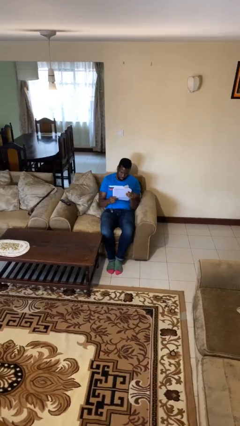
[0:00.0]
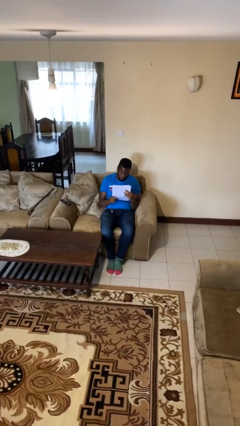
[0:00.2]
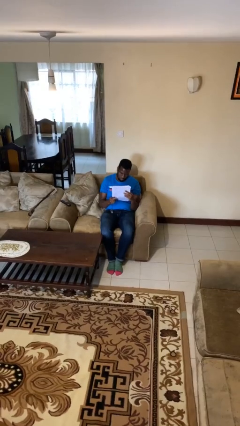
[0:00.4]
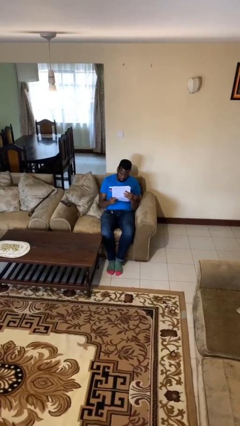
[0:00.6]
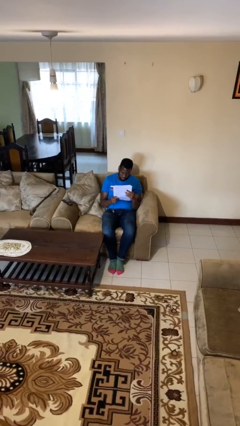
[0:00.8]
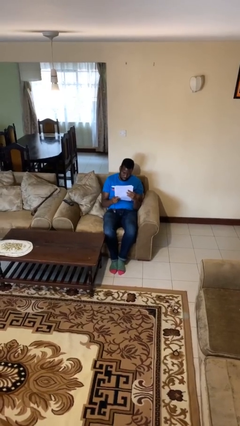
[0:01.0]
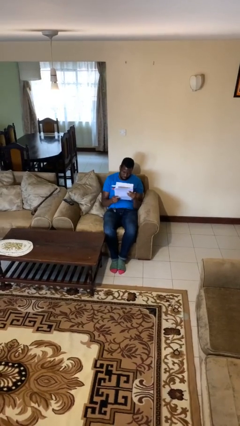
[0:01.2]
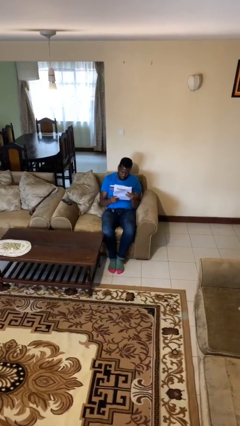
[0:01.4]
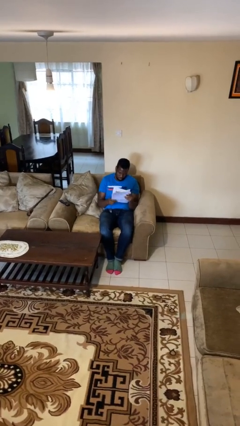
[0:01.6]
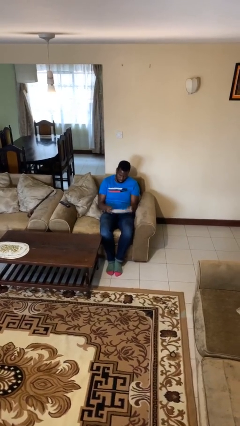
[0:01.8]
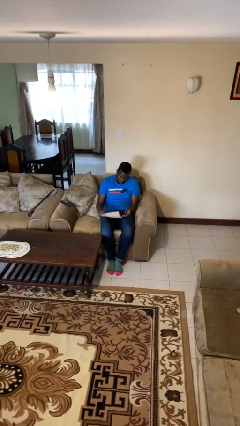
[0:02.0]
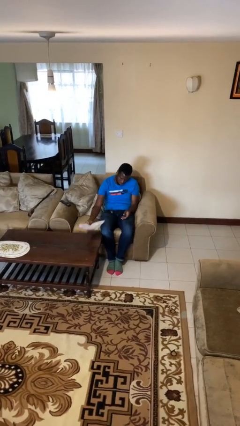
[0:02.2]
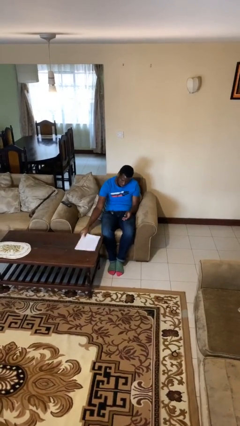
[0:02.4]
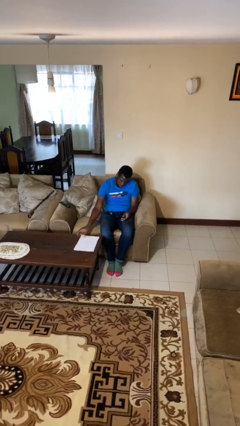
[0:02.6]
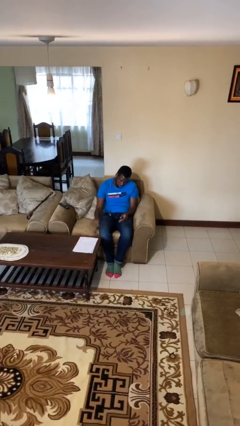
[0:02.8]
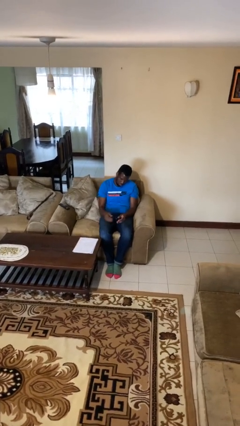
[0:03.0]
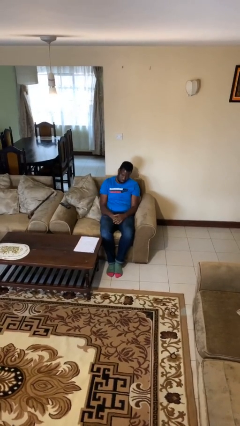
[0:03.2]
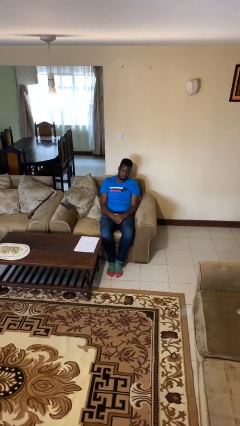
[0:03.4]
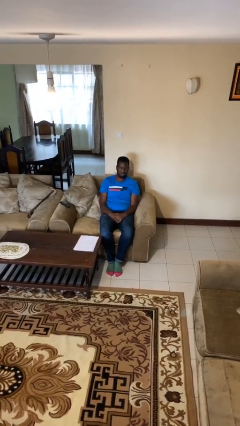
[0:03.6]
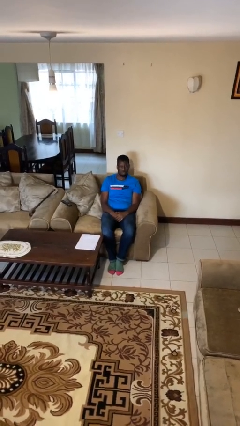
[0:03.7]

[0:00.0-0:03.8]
person puts down object on table

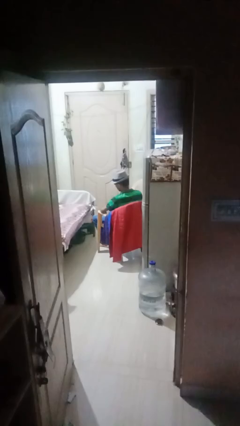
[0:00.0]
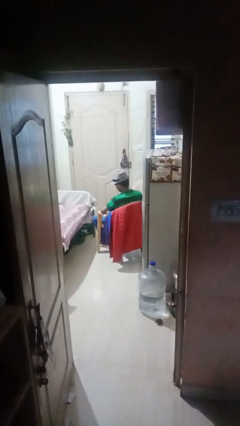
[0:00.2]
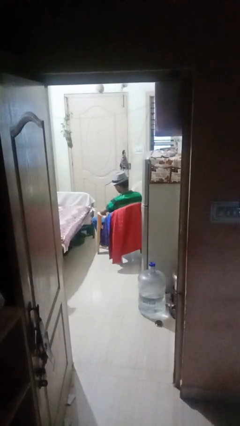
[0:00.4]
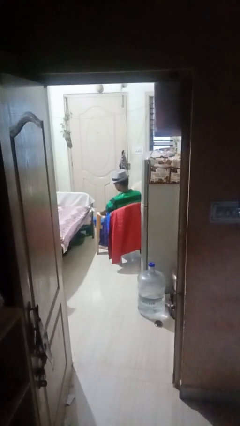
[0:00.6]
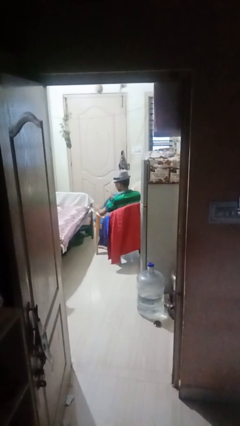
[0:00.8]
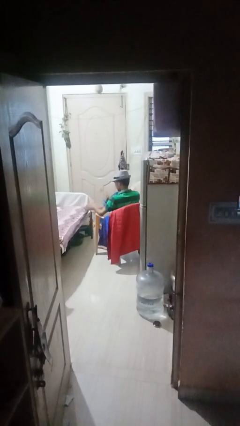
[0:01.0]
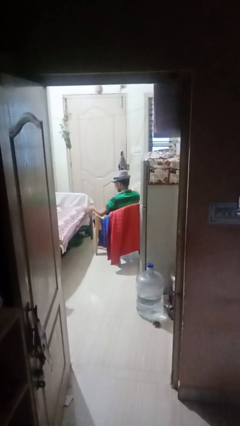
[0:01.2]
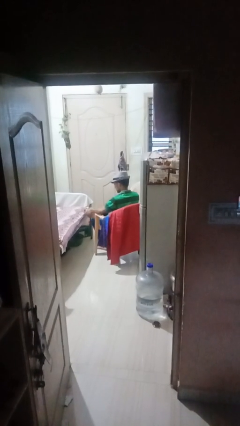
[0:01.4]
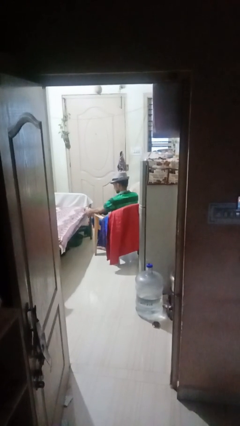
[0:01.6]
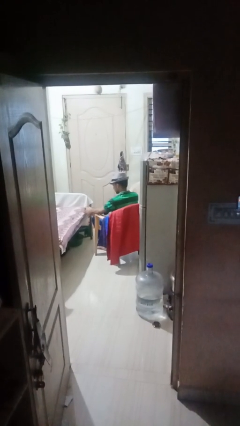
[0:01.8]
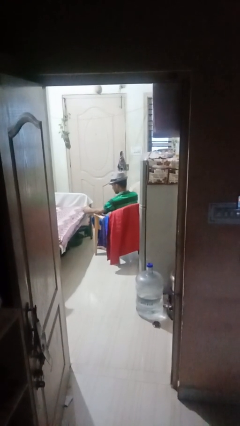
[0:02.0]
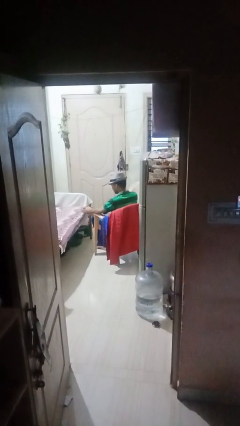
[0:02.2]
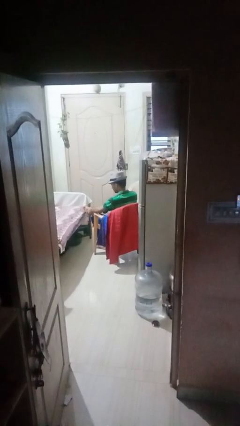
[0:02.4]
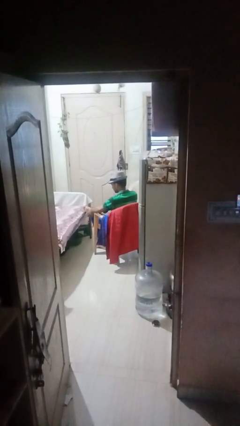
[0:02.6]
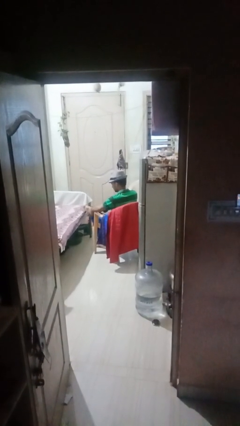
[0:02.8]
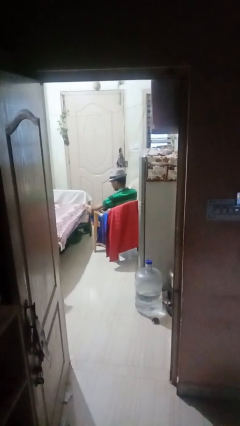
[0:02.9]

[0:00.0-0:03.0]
person rubs foot

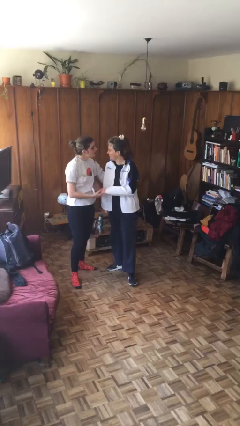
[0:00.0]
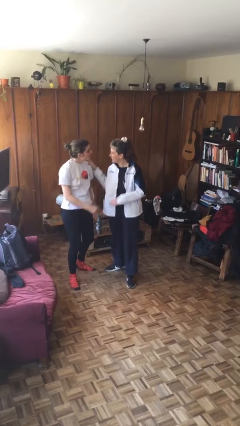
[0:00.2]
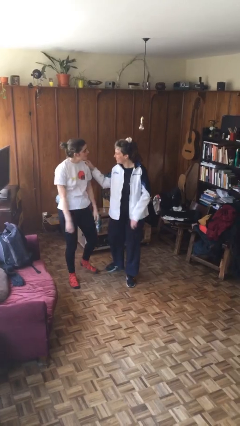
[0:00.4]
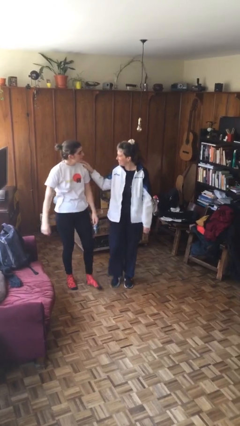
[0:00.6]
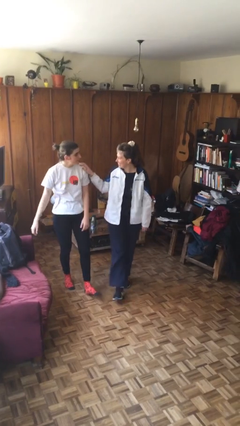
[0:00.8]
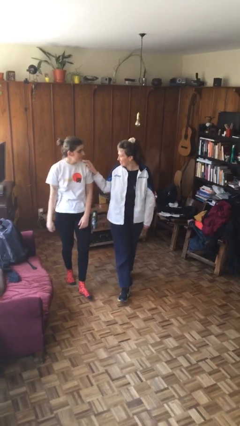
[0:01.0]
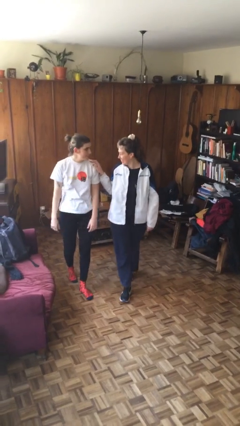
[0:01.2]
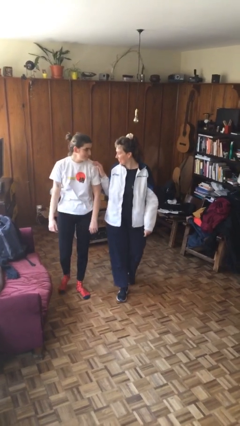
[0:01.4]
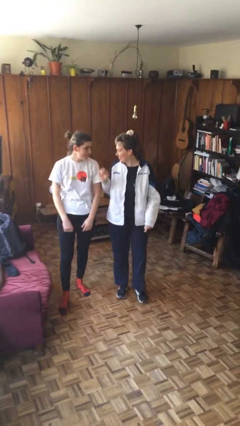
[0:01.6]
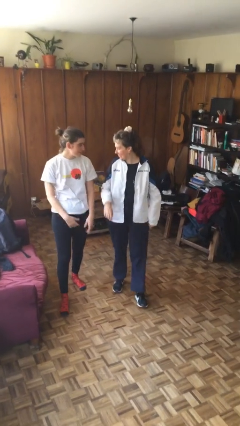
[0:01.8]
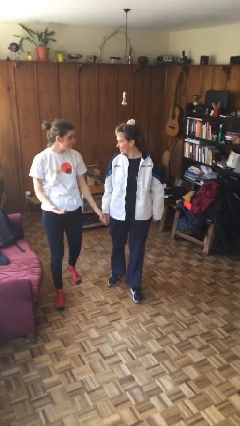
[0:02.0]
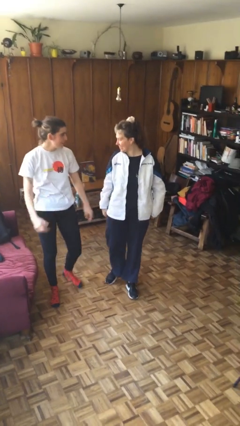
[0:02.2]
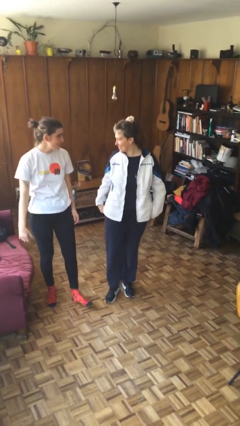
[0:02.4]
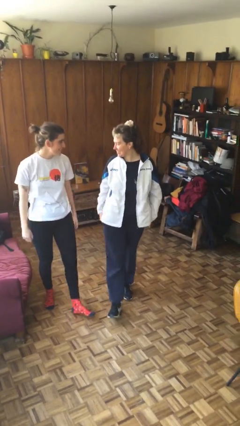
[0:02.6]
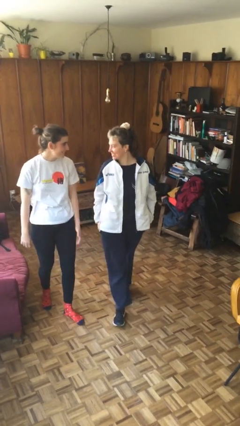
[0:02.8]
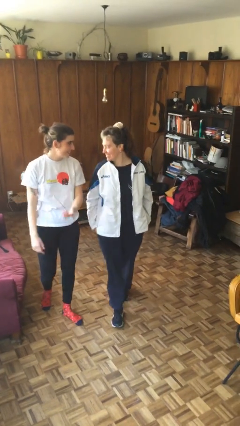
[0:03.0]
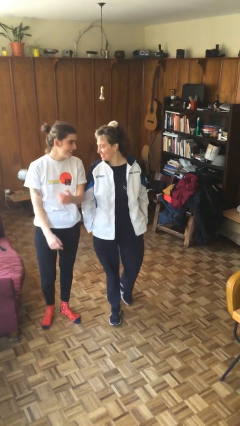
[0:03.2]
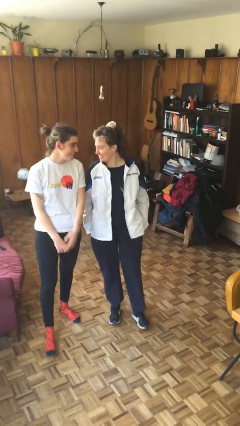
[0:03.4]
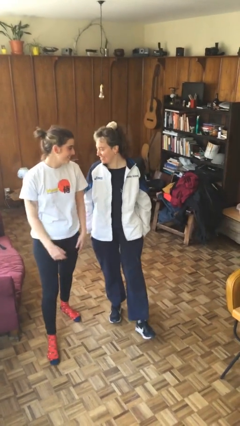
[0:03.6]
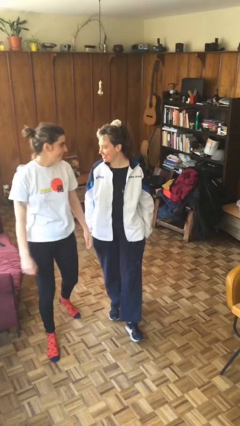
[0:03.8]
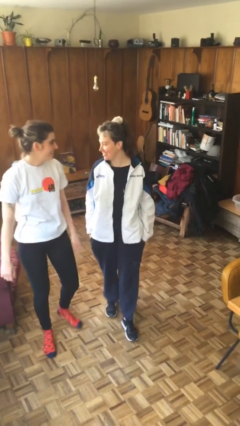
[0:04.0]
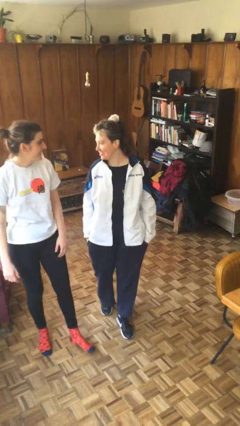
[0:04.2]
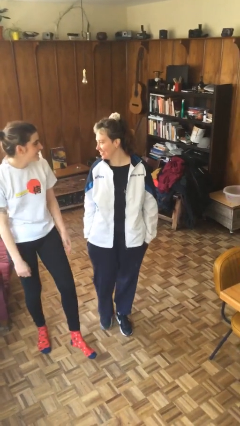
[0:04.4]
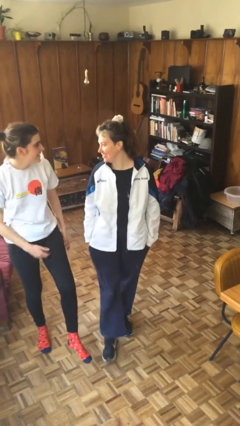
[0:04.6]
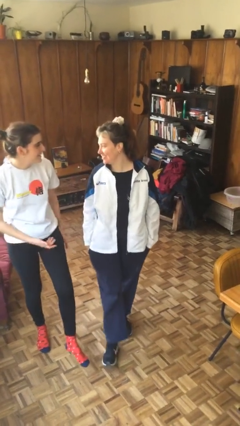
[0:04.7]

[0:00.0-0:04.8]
person talks to person

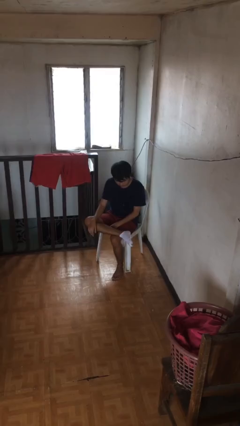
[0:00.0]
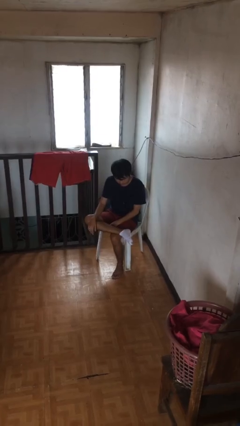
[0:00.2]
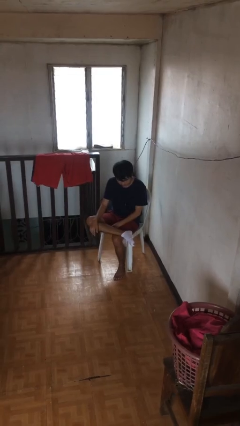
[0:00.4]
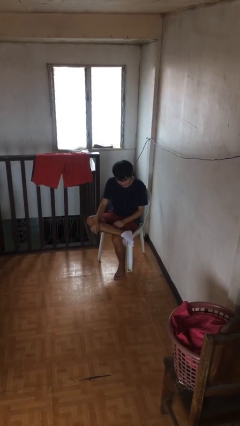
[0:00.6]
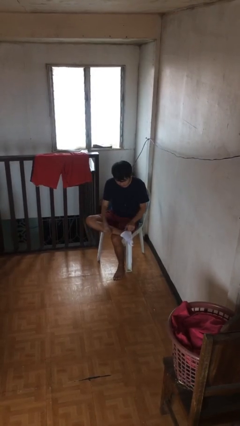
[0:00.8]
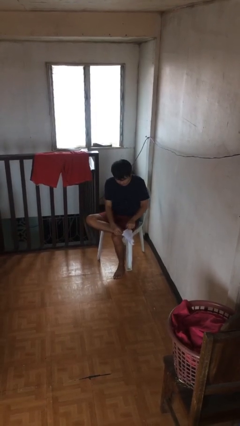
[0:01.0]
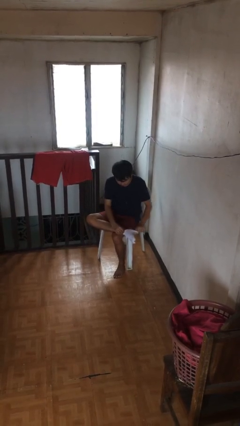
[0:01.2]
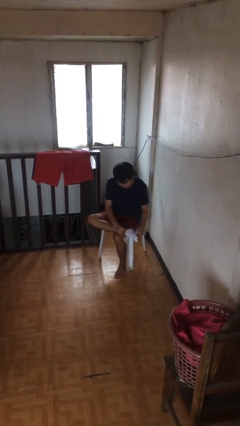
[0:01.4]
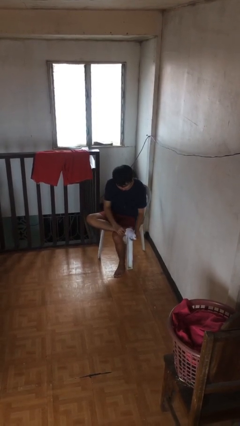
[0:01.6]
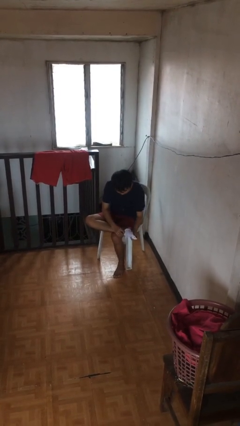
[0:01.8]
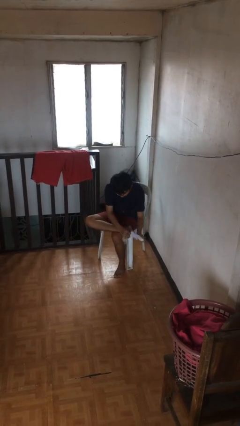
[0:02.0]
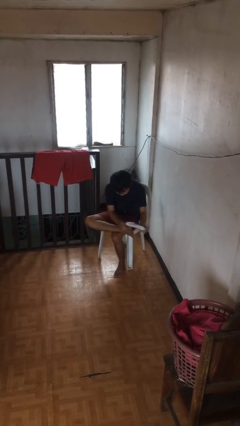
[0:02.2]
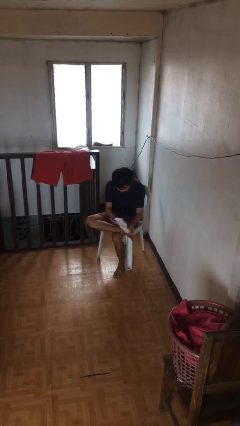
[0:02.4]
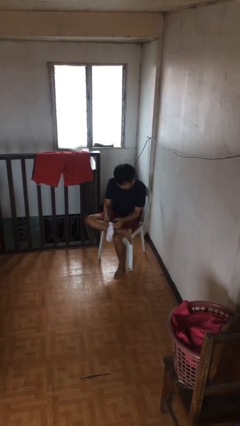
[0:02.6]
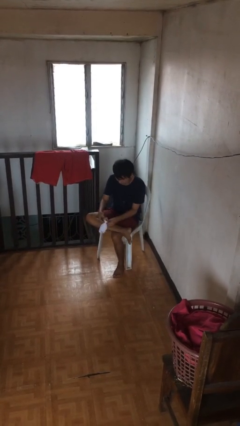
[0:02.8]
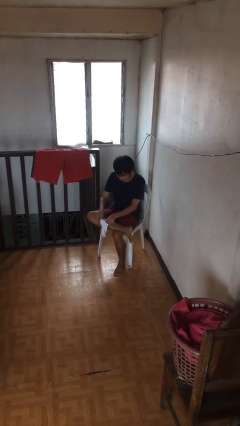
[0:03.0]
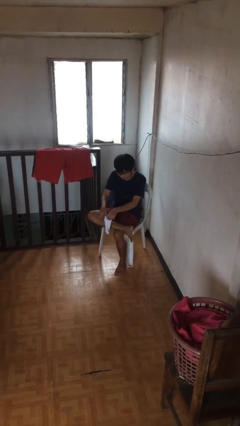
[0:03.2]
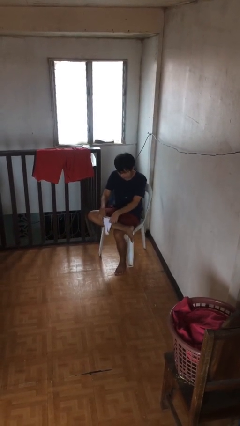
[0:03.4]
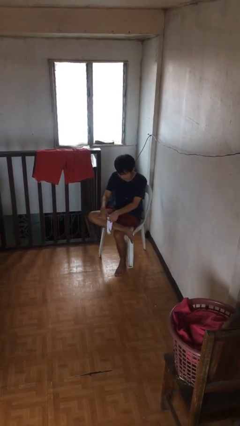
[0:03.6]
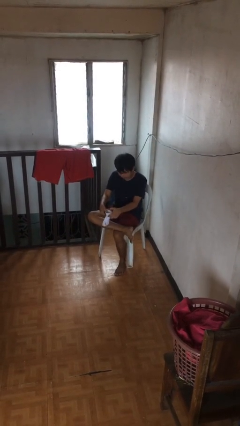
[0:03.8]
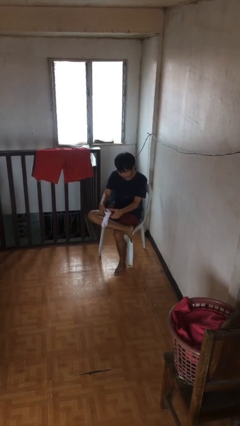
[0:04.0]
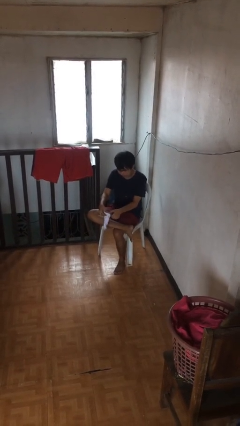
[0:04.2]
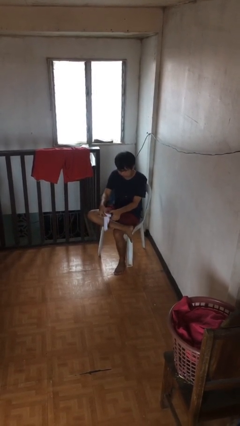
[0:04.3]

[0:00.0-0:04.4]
person takes off socks

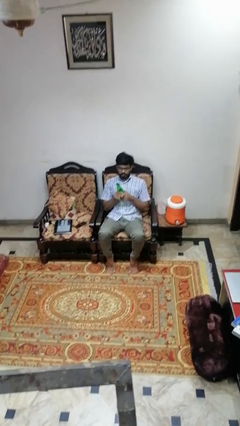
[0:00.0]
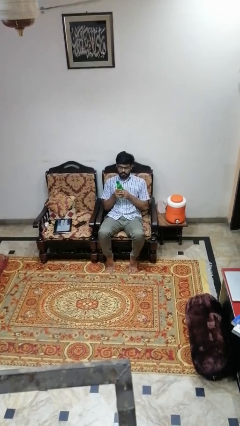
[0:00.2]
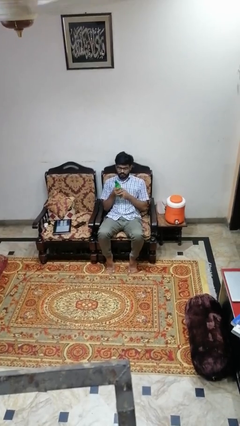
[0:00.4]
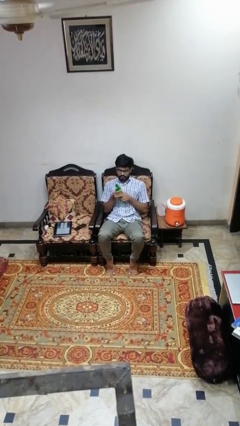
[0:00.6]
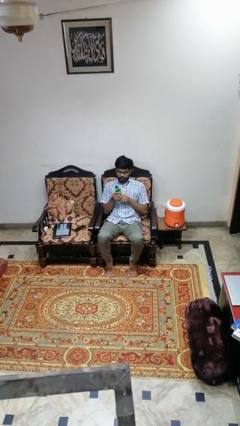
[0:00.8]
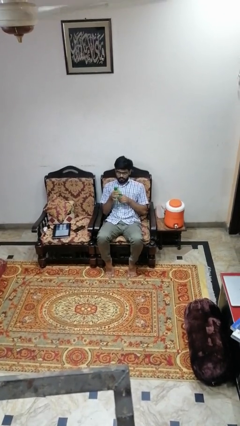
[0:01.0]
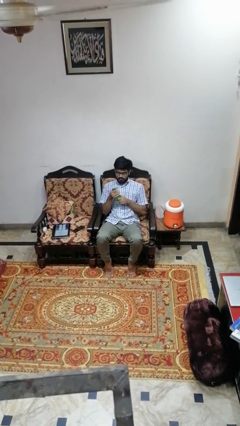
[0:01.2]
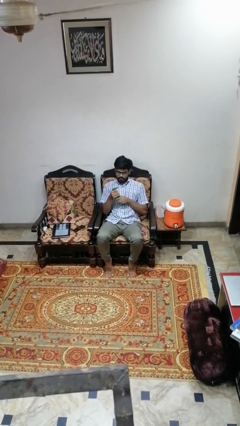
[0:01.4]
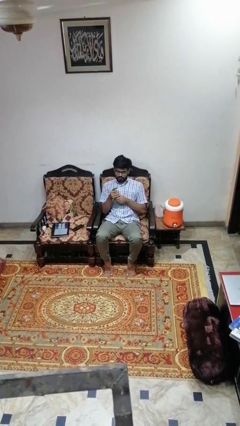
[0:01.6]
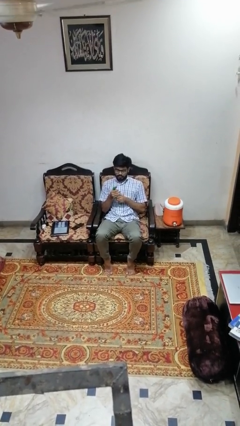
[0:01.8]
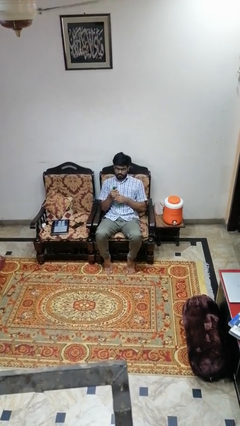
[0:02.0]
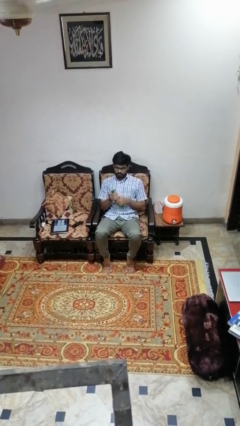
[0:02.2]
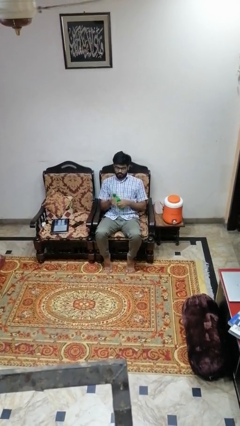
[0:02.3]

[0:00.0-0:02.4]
person squeezes object
